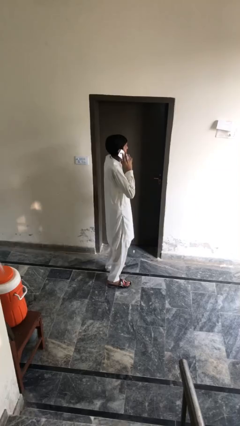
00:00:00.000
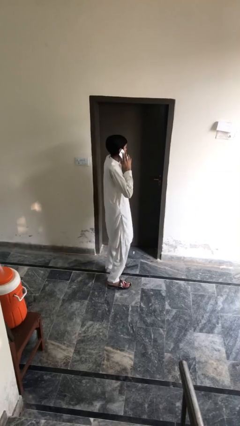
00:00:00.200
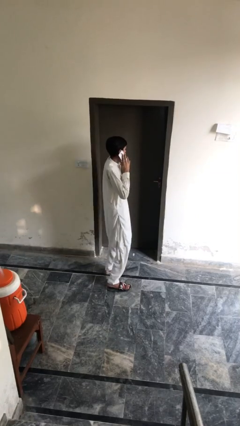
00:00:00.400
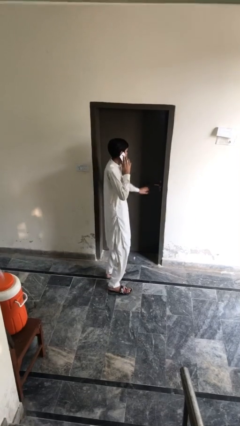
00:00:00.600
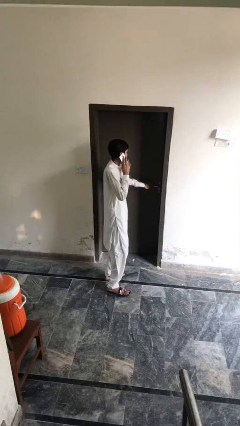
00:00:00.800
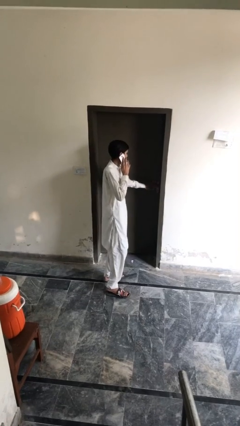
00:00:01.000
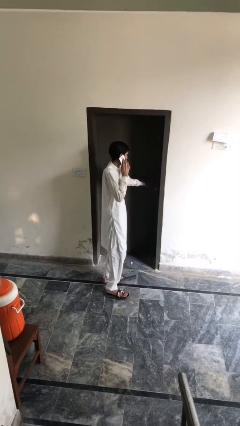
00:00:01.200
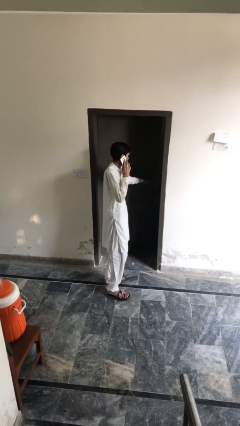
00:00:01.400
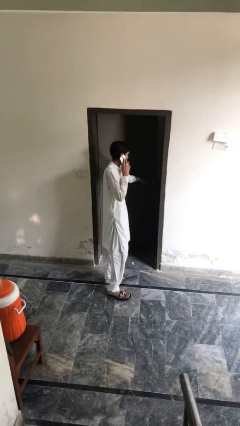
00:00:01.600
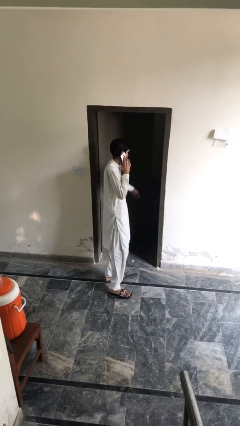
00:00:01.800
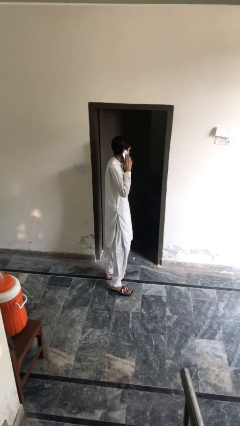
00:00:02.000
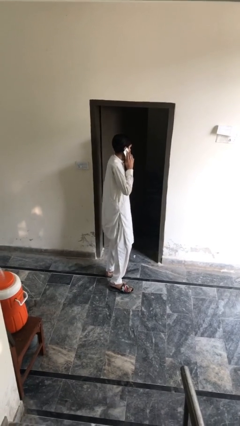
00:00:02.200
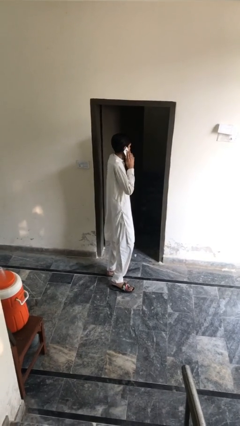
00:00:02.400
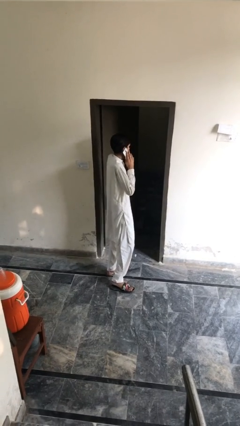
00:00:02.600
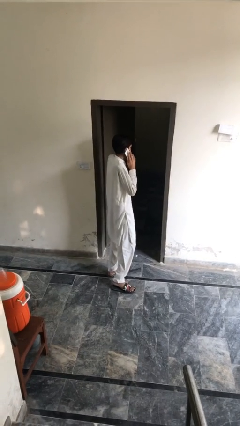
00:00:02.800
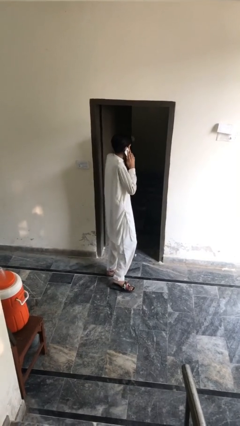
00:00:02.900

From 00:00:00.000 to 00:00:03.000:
person opens facility door

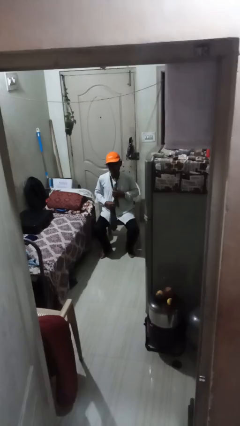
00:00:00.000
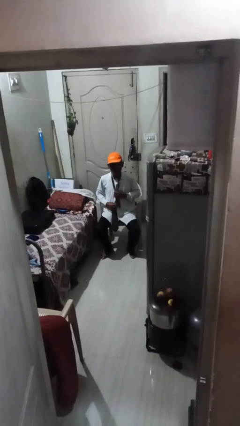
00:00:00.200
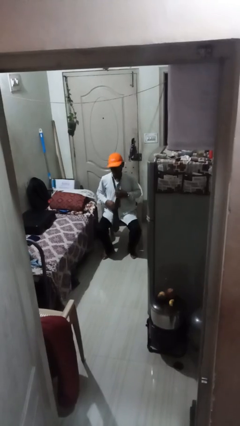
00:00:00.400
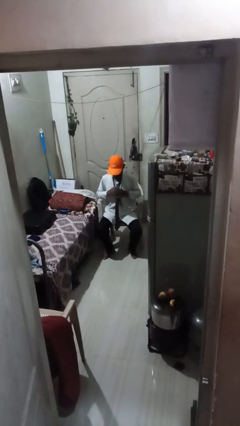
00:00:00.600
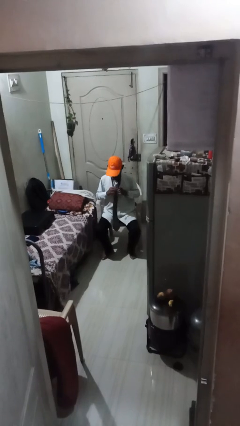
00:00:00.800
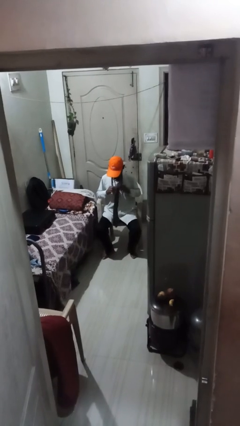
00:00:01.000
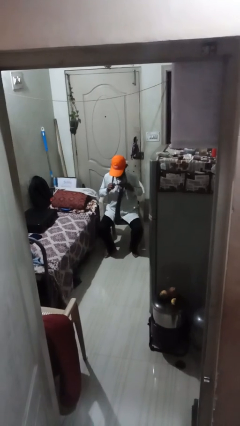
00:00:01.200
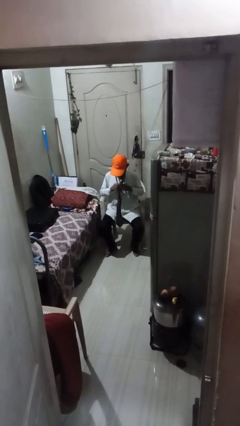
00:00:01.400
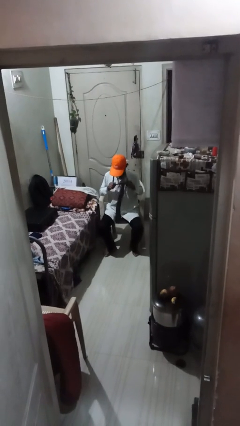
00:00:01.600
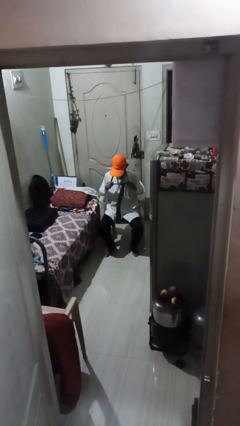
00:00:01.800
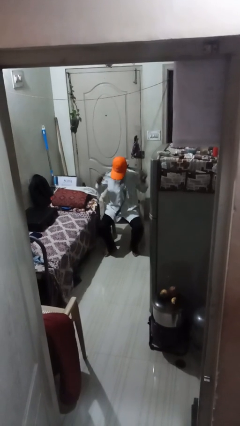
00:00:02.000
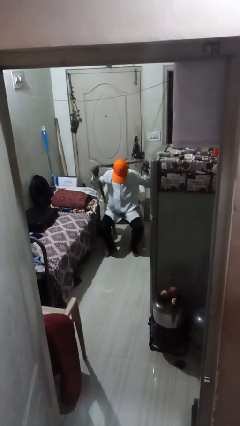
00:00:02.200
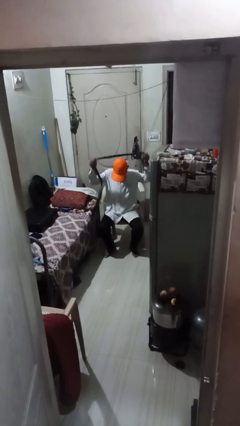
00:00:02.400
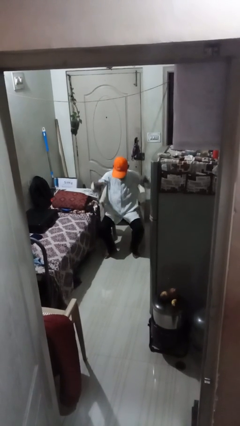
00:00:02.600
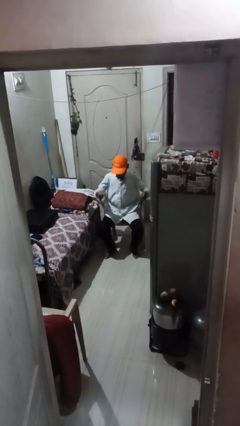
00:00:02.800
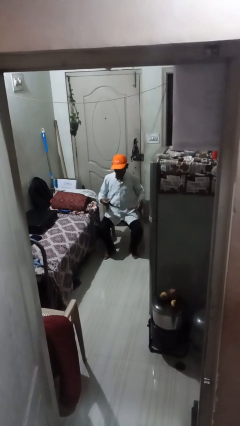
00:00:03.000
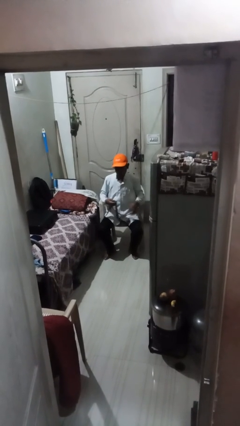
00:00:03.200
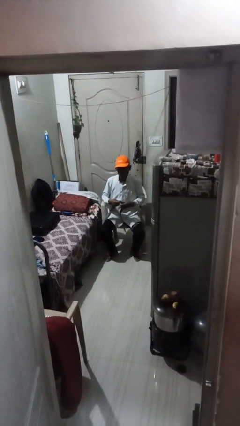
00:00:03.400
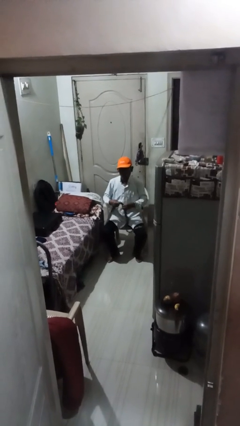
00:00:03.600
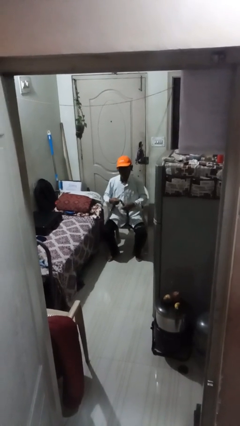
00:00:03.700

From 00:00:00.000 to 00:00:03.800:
person takes off necktie

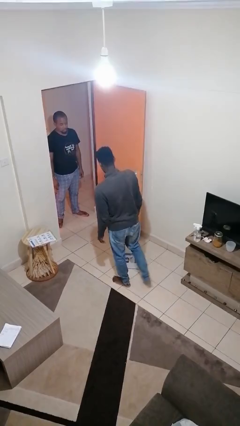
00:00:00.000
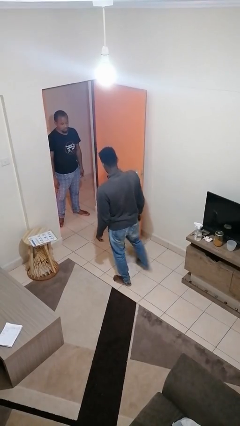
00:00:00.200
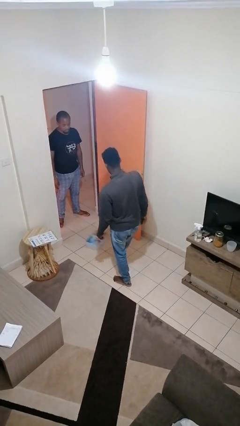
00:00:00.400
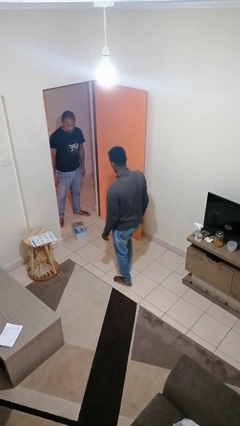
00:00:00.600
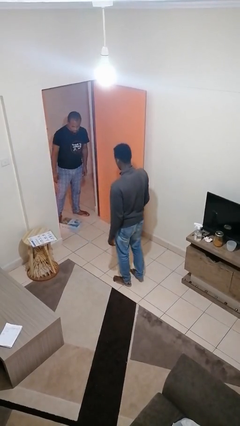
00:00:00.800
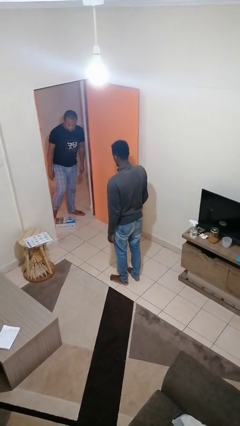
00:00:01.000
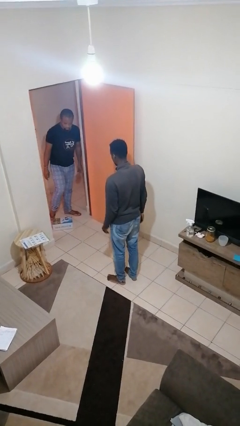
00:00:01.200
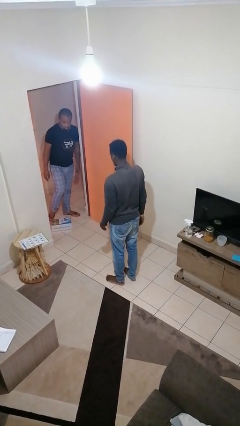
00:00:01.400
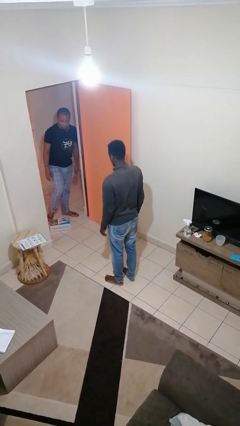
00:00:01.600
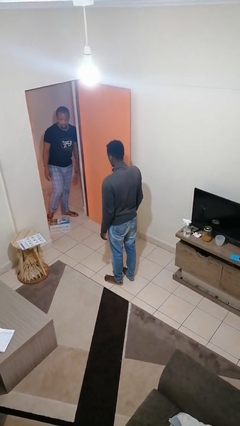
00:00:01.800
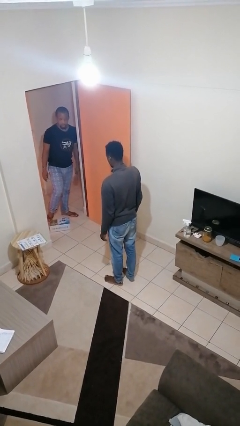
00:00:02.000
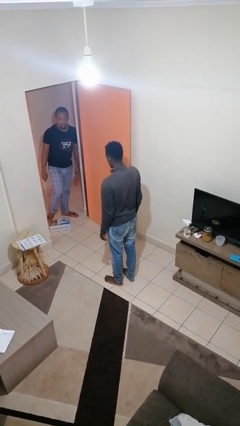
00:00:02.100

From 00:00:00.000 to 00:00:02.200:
person kicks object to person

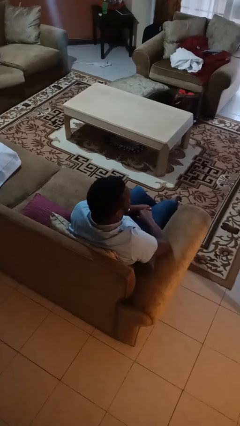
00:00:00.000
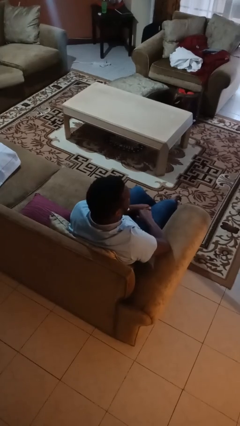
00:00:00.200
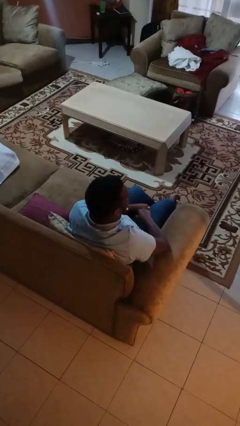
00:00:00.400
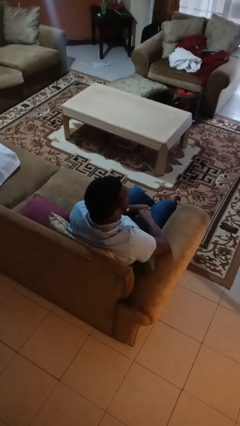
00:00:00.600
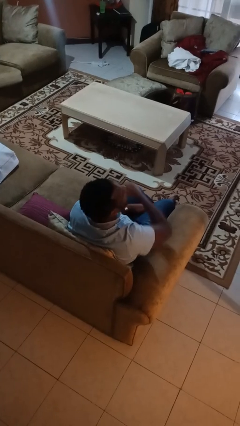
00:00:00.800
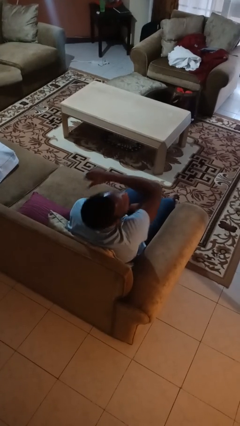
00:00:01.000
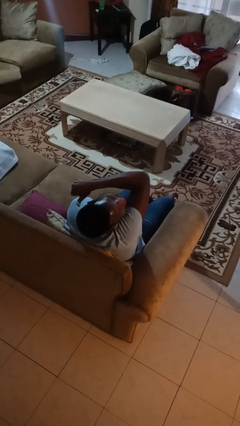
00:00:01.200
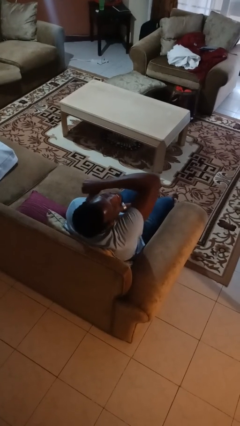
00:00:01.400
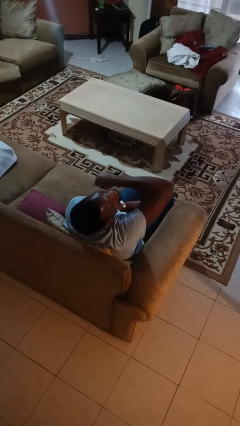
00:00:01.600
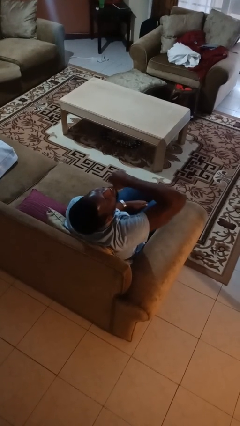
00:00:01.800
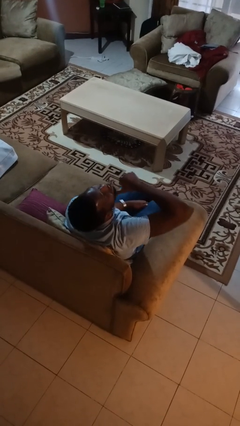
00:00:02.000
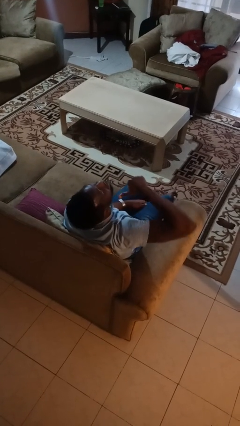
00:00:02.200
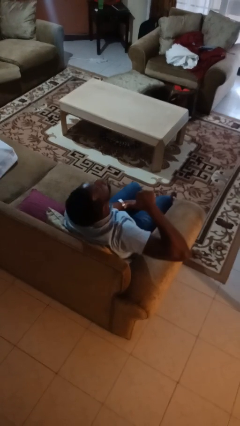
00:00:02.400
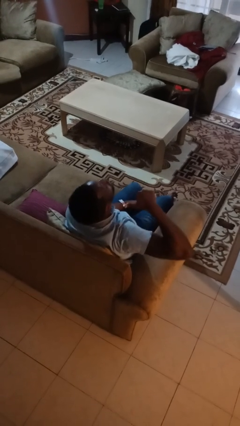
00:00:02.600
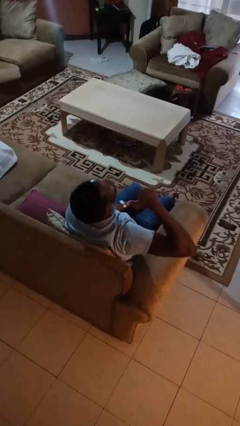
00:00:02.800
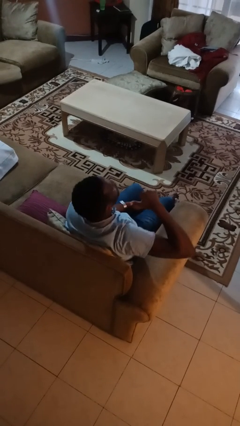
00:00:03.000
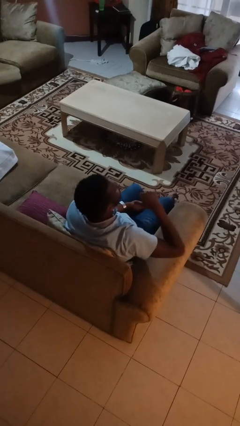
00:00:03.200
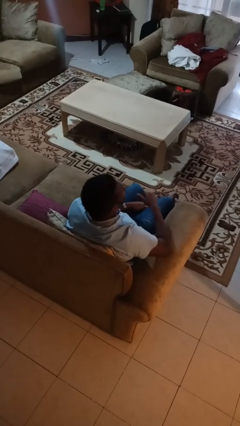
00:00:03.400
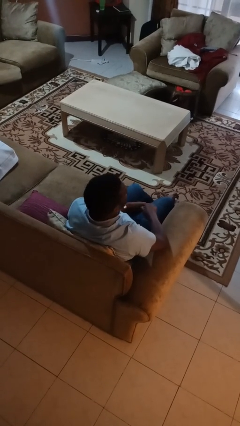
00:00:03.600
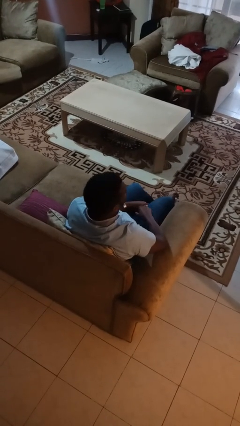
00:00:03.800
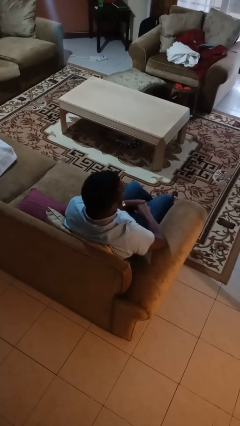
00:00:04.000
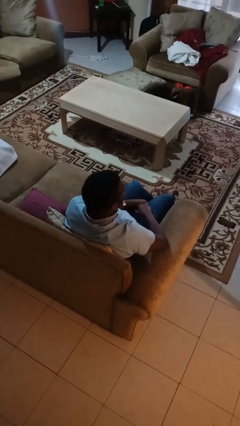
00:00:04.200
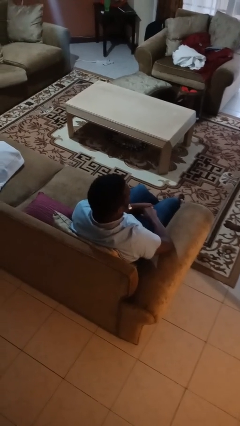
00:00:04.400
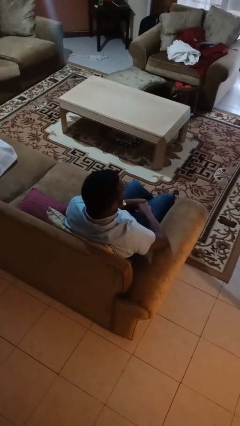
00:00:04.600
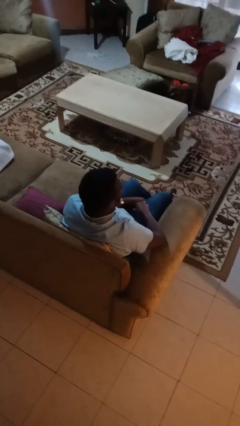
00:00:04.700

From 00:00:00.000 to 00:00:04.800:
person gestures cut

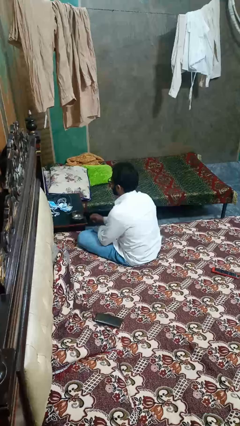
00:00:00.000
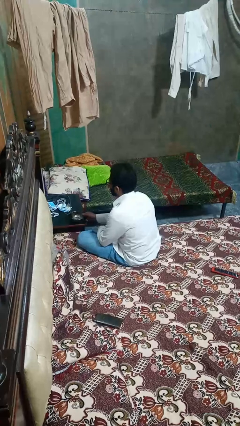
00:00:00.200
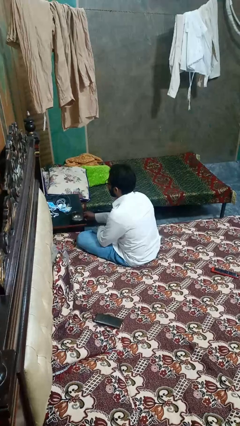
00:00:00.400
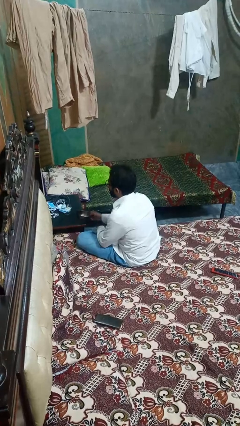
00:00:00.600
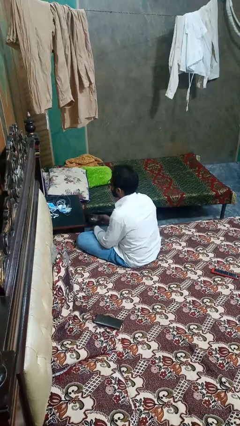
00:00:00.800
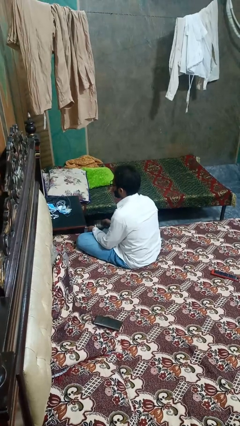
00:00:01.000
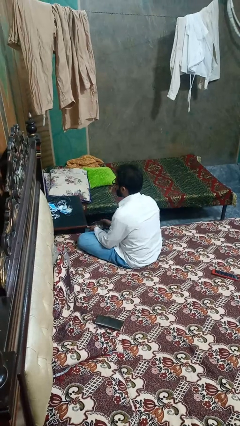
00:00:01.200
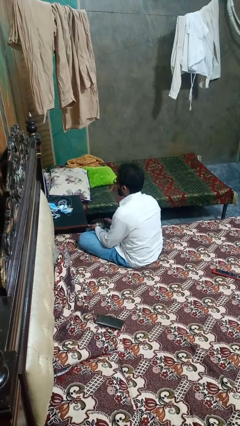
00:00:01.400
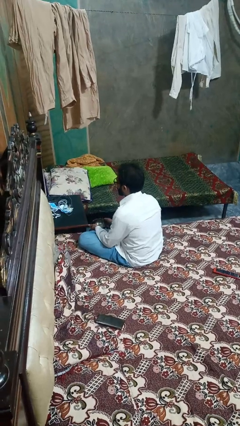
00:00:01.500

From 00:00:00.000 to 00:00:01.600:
person picks up object from table

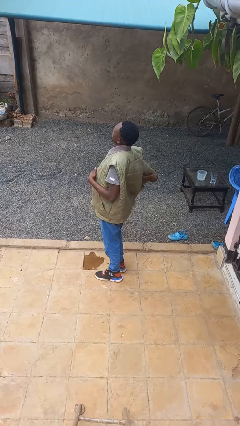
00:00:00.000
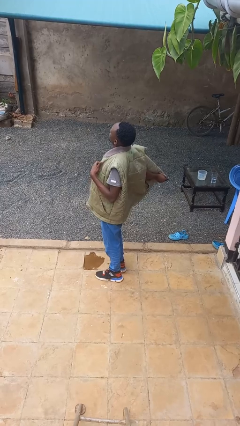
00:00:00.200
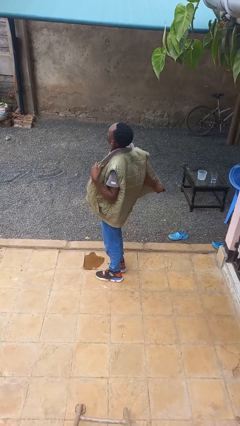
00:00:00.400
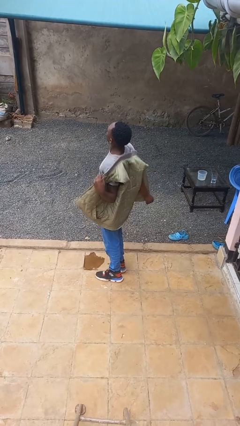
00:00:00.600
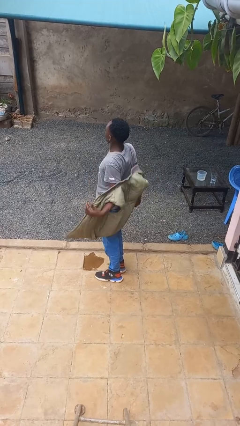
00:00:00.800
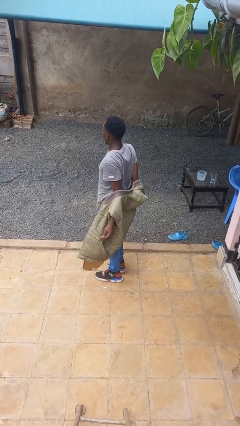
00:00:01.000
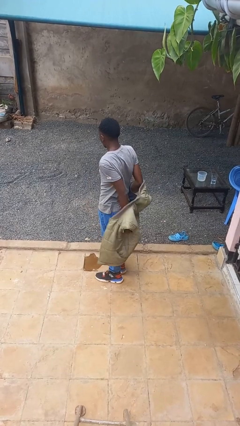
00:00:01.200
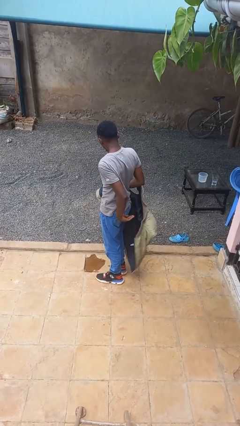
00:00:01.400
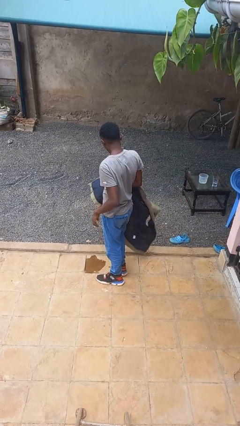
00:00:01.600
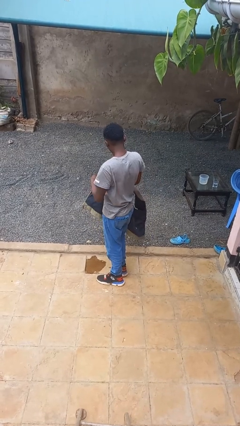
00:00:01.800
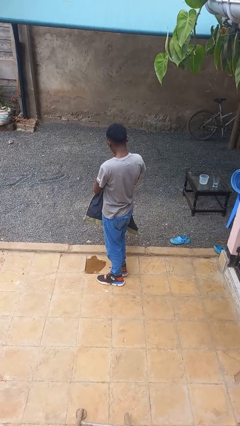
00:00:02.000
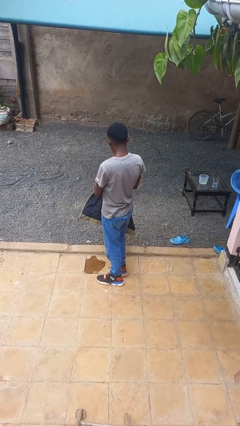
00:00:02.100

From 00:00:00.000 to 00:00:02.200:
person takes off jacket
